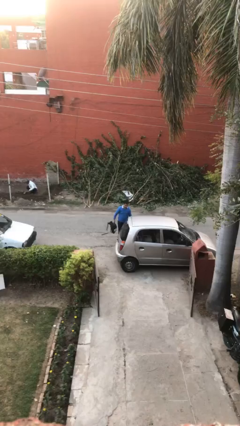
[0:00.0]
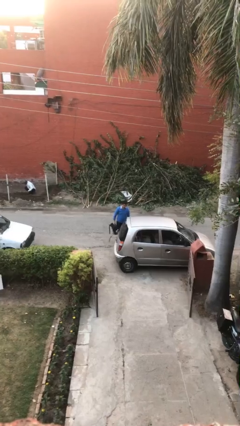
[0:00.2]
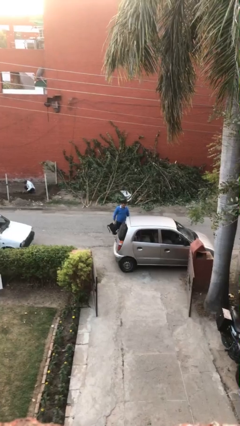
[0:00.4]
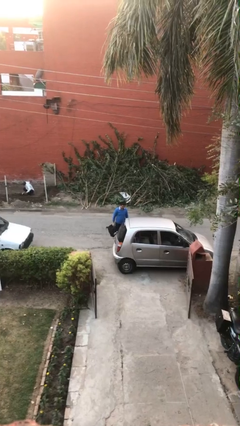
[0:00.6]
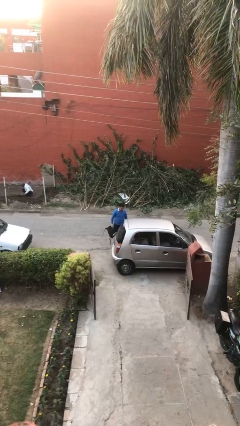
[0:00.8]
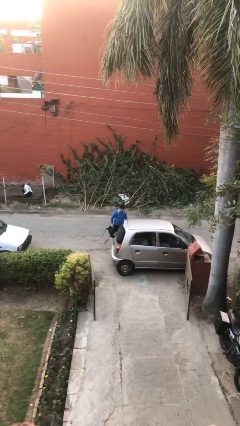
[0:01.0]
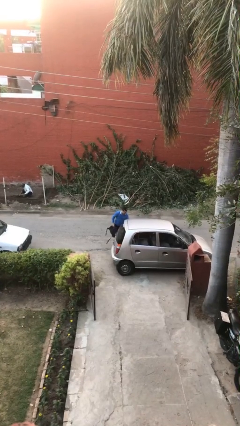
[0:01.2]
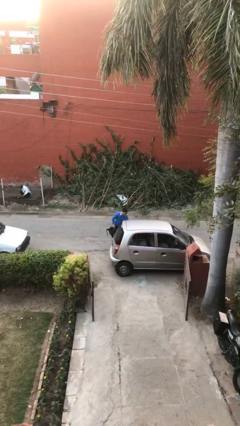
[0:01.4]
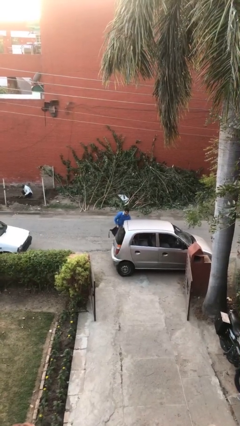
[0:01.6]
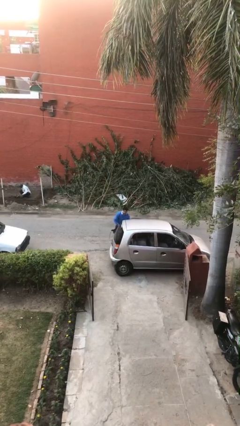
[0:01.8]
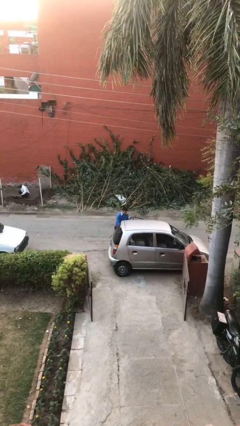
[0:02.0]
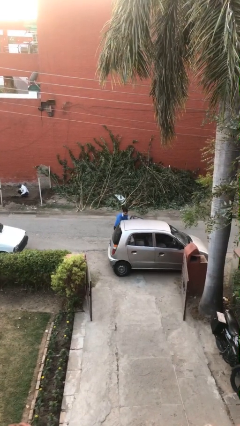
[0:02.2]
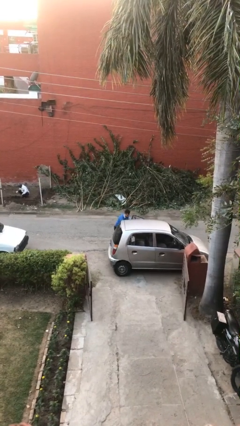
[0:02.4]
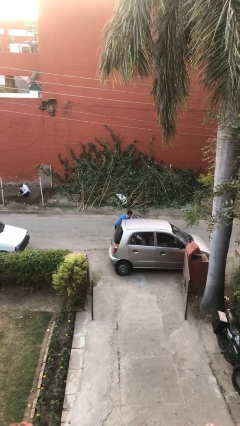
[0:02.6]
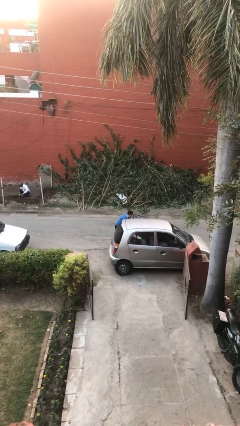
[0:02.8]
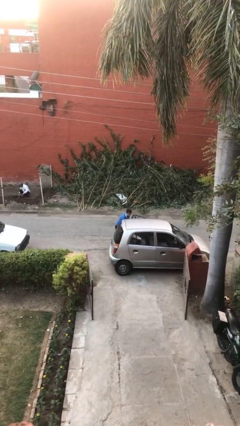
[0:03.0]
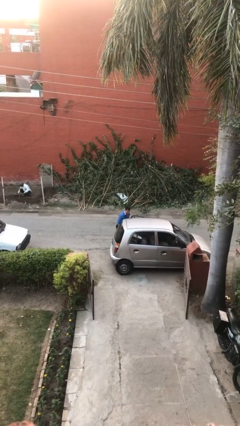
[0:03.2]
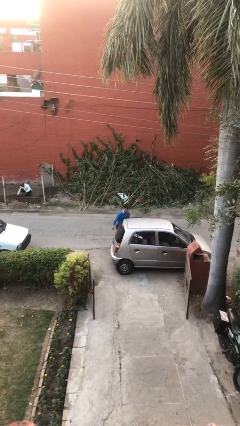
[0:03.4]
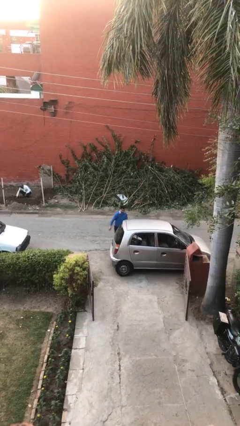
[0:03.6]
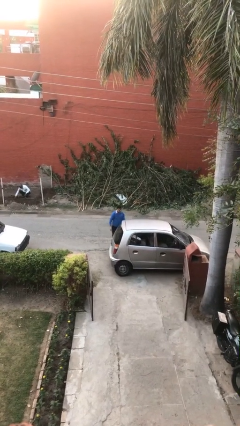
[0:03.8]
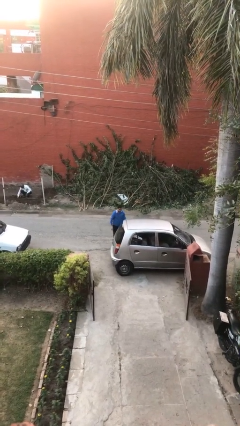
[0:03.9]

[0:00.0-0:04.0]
person loads car

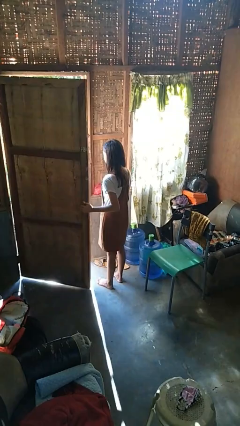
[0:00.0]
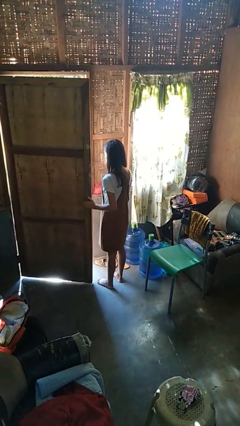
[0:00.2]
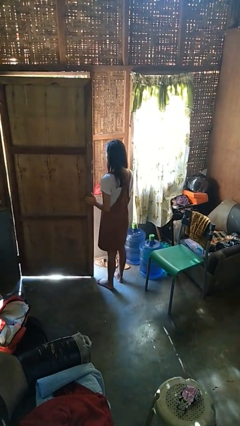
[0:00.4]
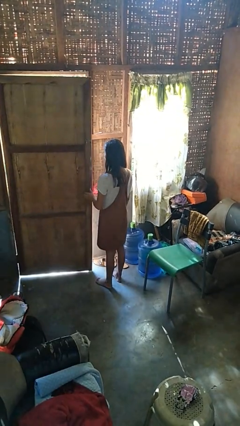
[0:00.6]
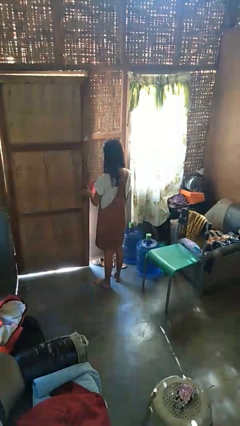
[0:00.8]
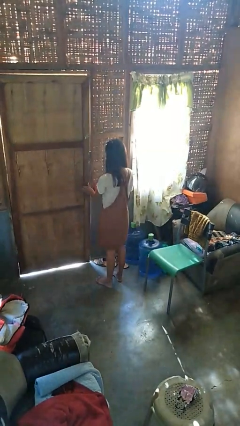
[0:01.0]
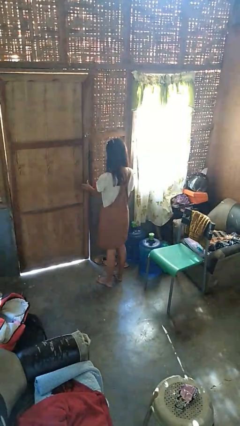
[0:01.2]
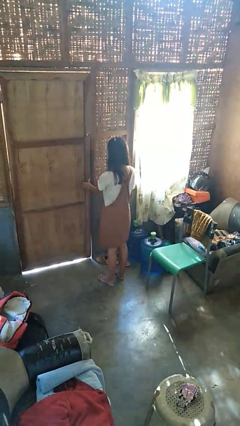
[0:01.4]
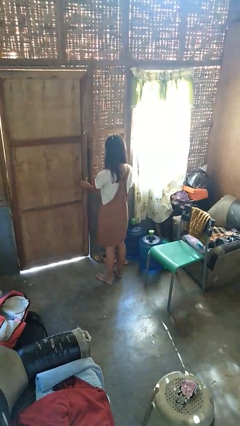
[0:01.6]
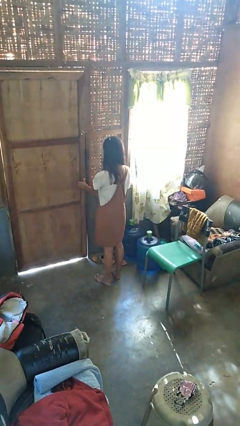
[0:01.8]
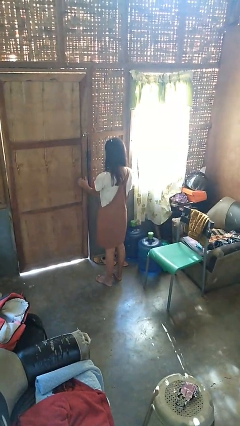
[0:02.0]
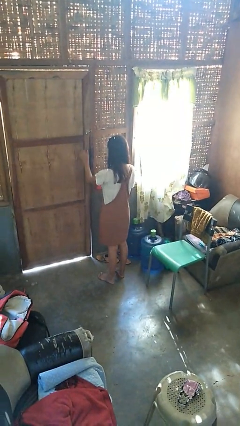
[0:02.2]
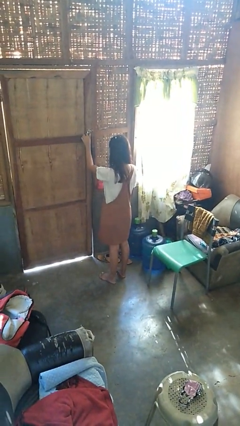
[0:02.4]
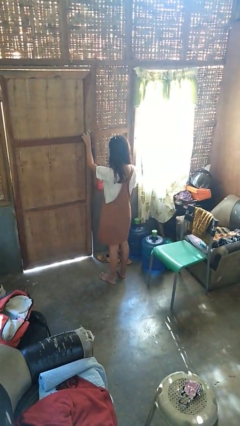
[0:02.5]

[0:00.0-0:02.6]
person closes facility door

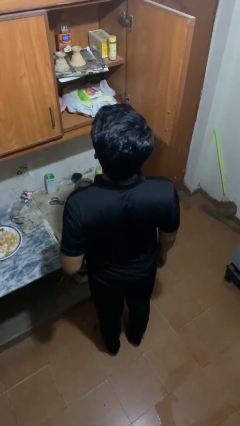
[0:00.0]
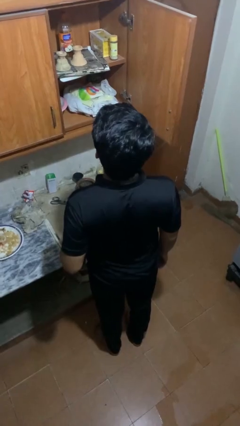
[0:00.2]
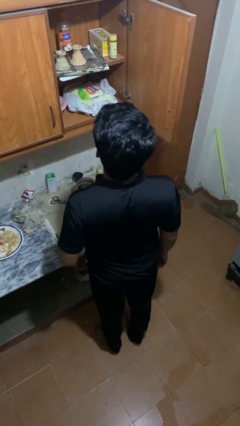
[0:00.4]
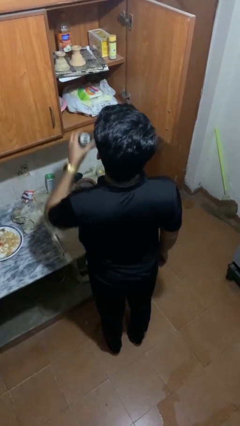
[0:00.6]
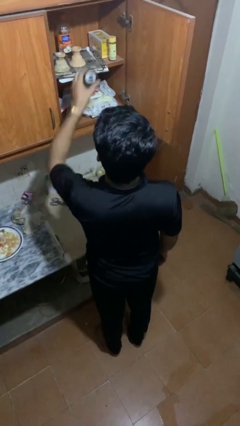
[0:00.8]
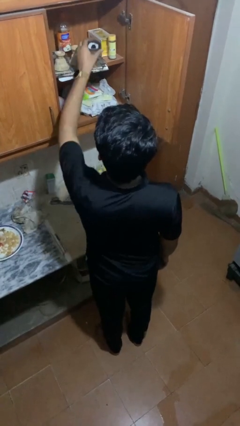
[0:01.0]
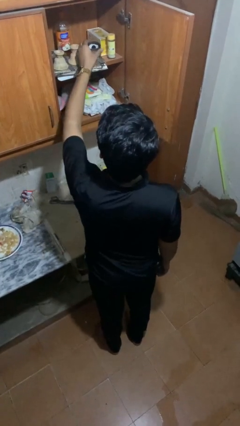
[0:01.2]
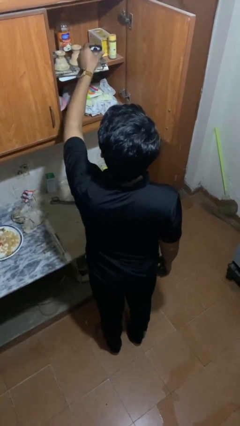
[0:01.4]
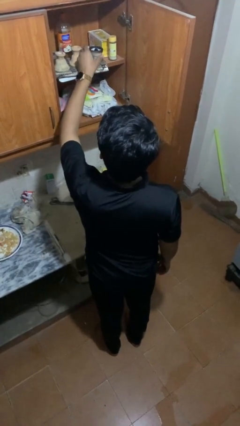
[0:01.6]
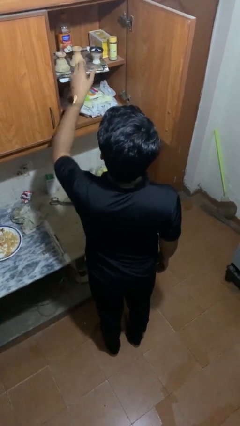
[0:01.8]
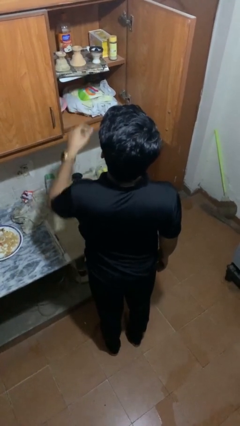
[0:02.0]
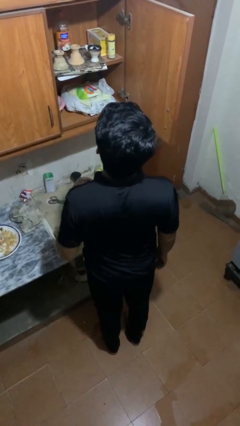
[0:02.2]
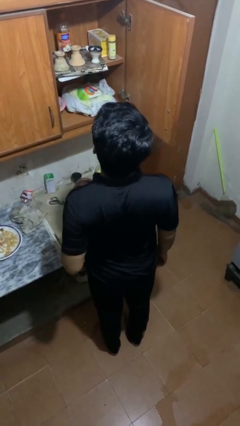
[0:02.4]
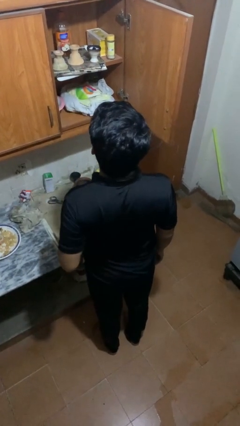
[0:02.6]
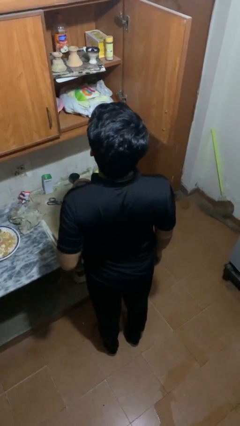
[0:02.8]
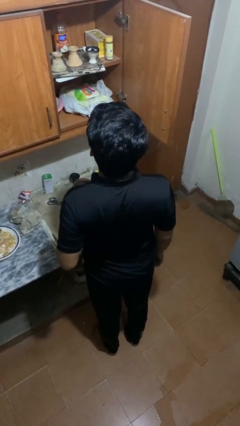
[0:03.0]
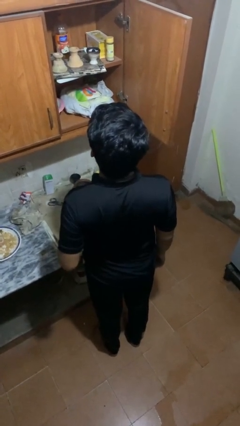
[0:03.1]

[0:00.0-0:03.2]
person puts object in cabinet

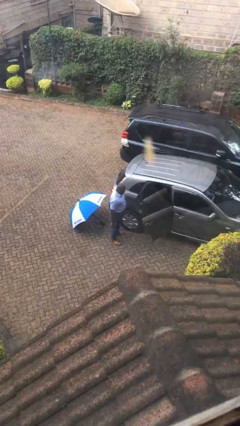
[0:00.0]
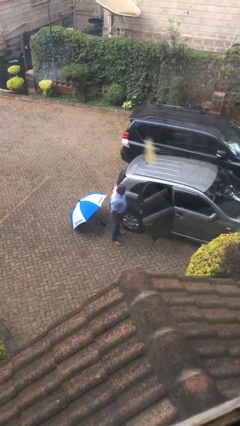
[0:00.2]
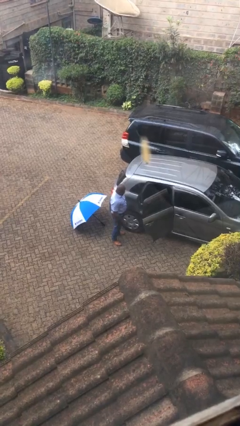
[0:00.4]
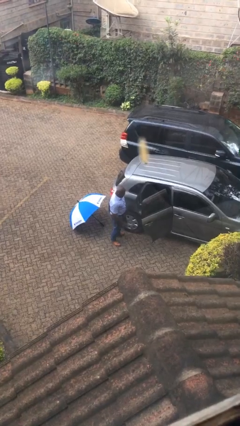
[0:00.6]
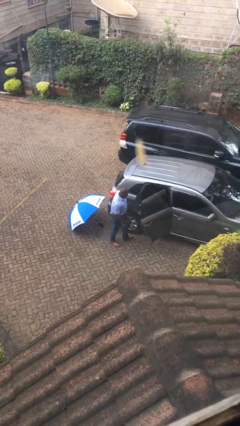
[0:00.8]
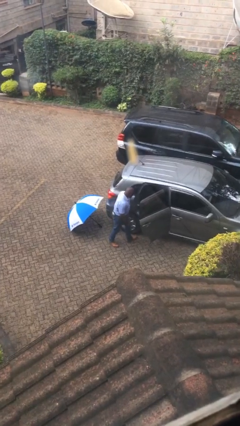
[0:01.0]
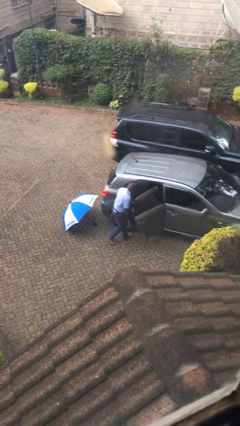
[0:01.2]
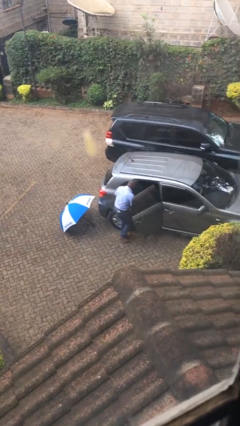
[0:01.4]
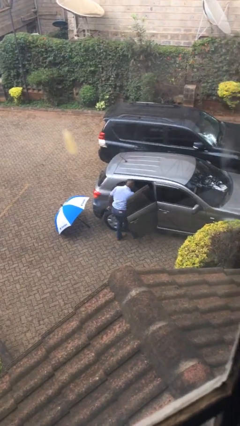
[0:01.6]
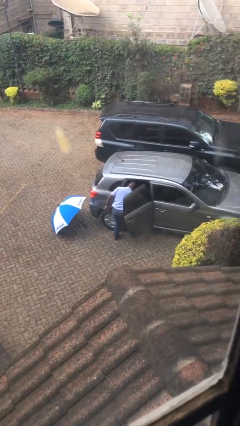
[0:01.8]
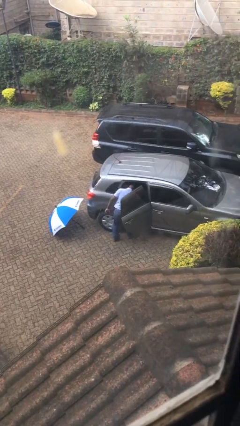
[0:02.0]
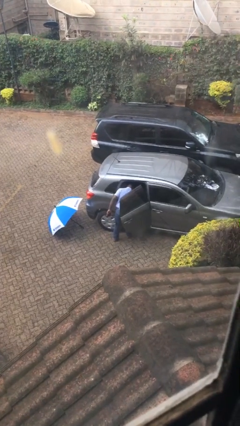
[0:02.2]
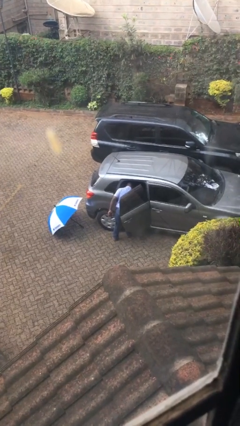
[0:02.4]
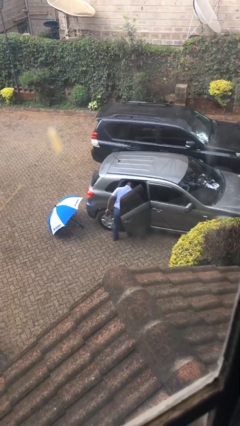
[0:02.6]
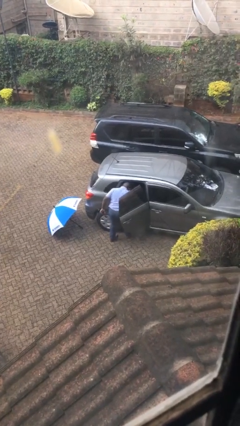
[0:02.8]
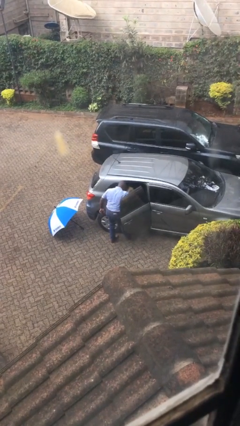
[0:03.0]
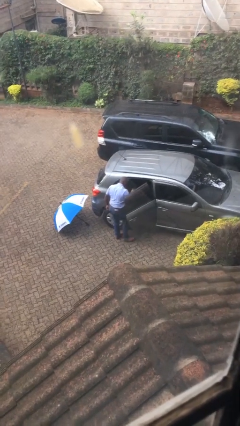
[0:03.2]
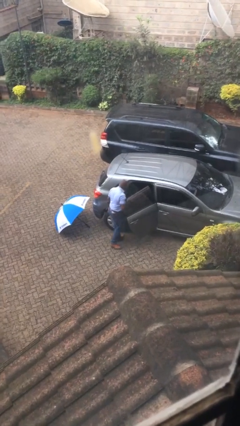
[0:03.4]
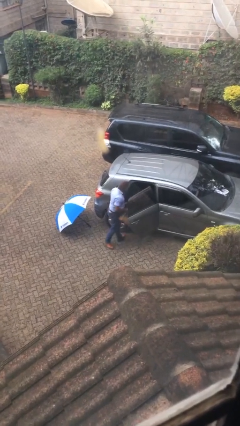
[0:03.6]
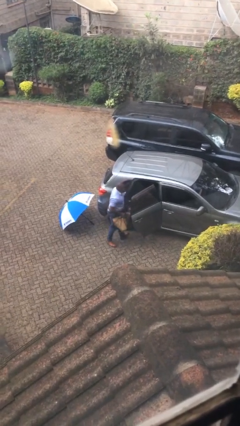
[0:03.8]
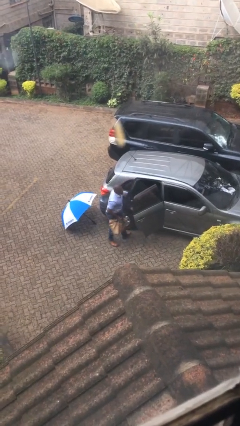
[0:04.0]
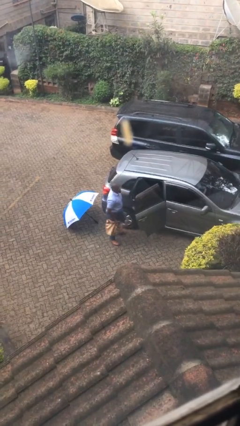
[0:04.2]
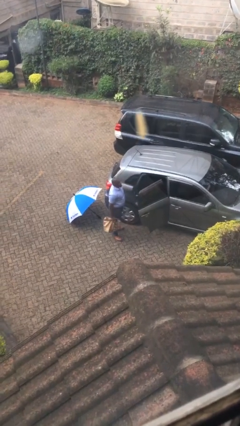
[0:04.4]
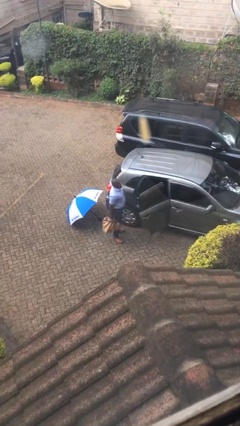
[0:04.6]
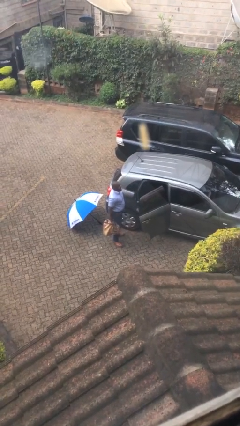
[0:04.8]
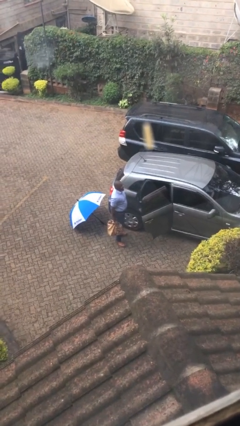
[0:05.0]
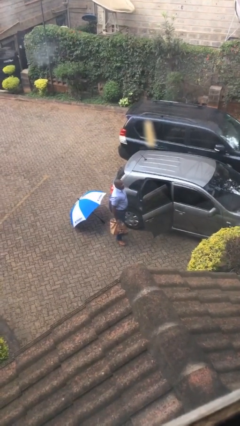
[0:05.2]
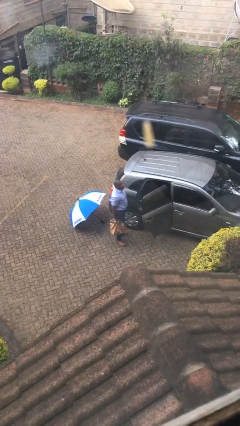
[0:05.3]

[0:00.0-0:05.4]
person unloads car

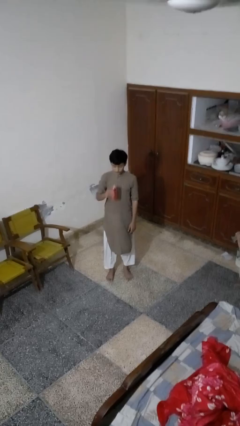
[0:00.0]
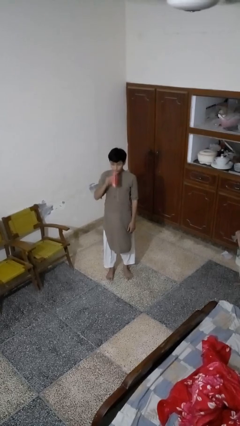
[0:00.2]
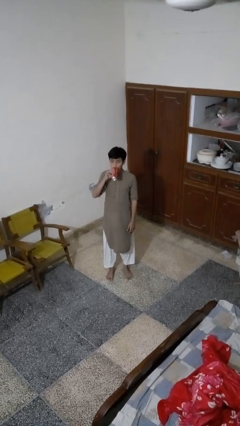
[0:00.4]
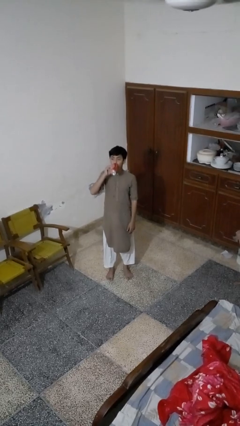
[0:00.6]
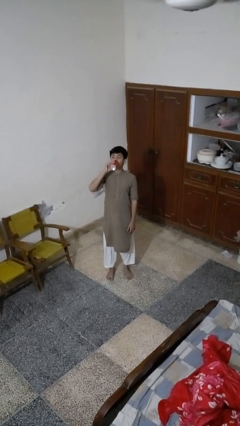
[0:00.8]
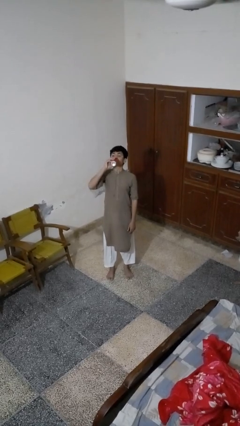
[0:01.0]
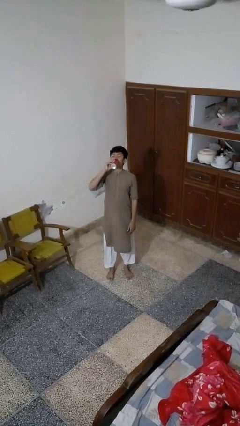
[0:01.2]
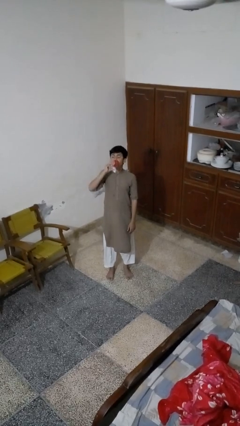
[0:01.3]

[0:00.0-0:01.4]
person drinks from beverage can

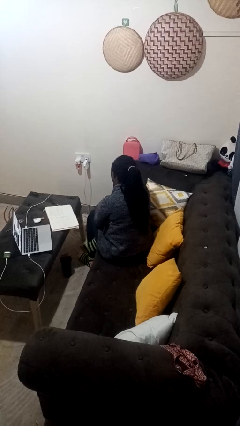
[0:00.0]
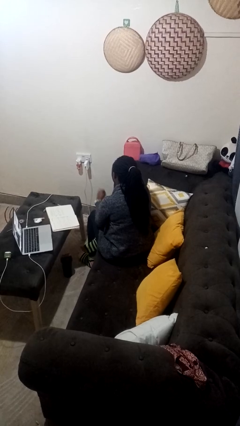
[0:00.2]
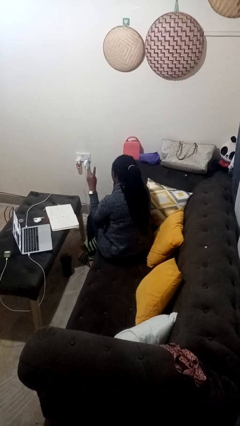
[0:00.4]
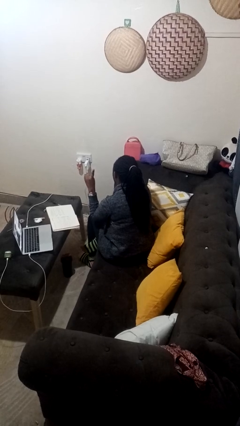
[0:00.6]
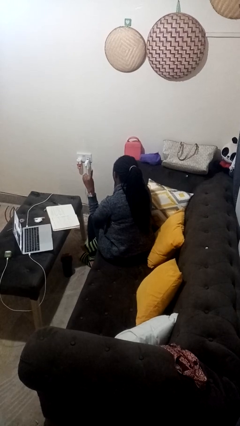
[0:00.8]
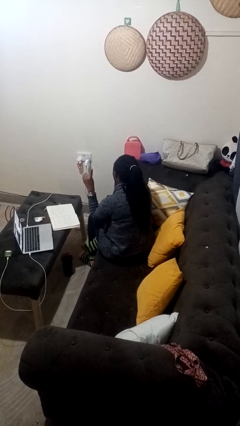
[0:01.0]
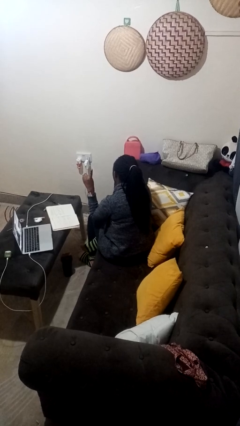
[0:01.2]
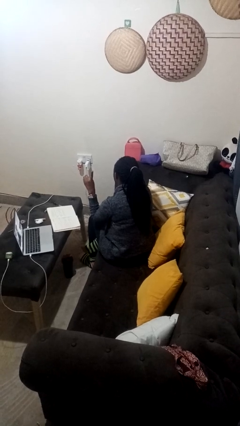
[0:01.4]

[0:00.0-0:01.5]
person gestures number one
